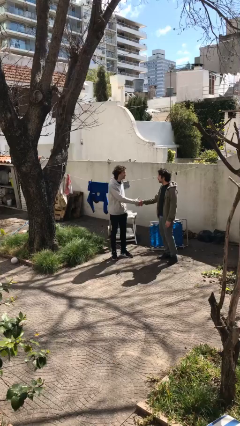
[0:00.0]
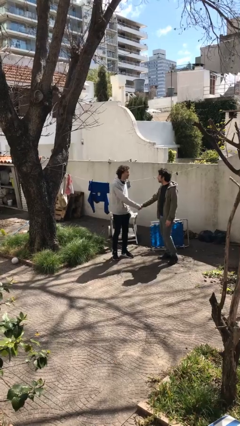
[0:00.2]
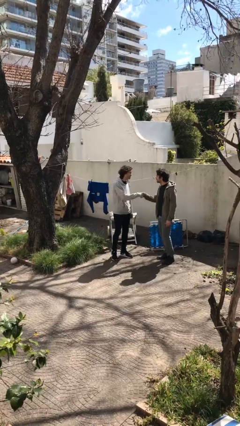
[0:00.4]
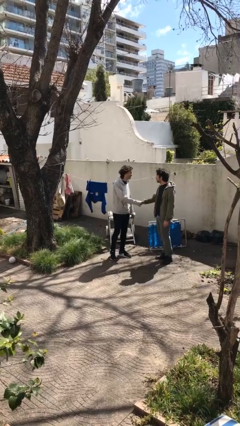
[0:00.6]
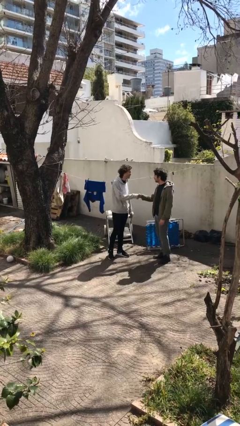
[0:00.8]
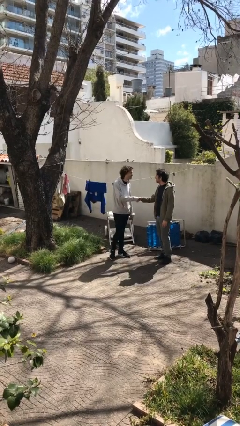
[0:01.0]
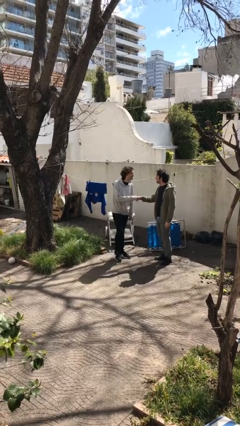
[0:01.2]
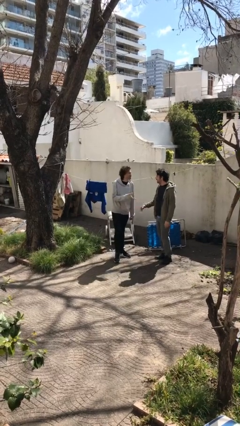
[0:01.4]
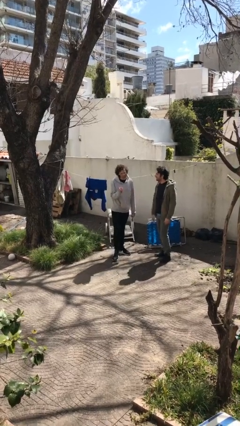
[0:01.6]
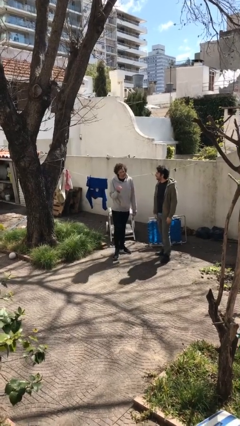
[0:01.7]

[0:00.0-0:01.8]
person shakes hand

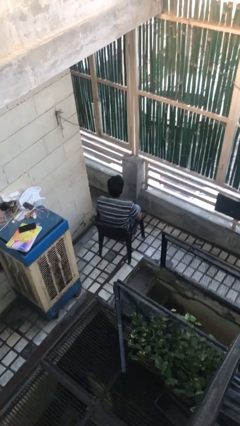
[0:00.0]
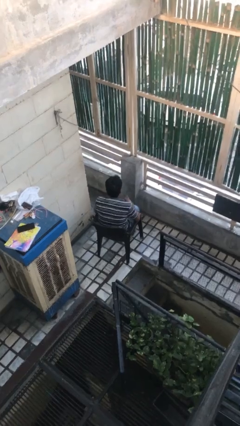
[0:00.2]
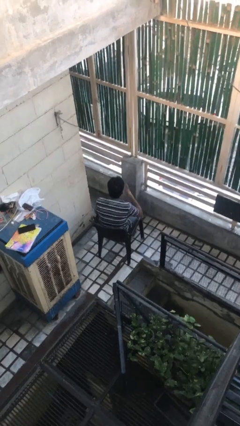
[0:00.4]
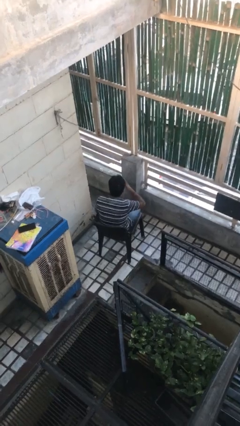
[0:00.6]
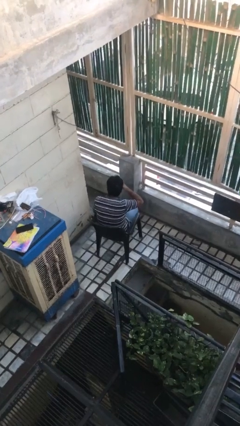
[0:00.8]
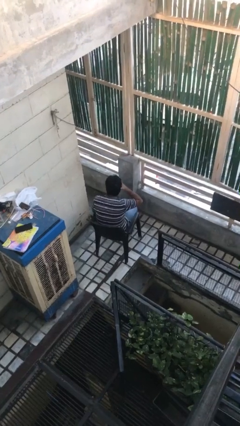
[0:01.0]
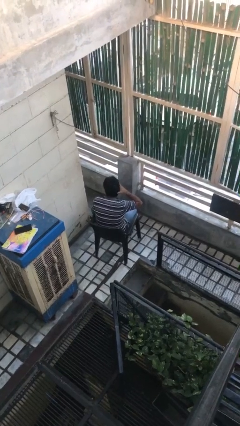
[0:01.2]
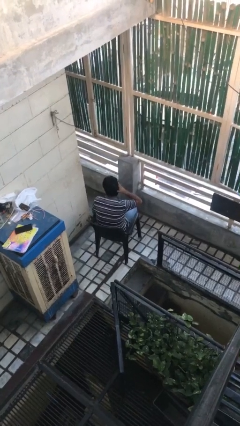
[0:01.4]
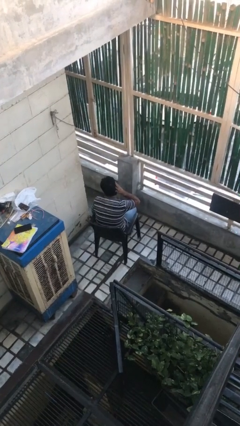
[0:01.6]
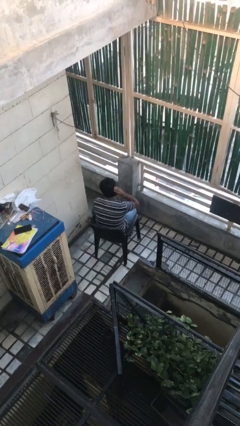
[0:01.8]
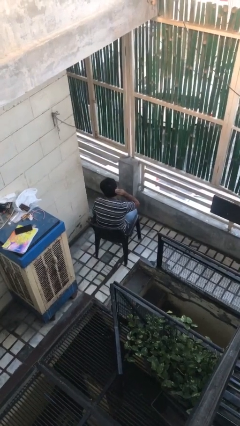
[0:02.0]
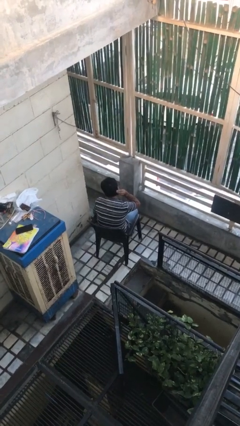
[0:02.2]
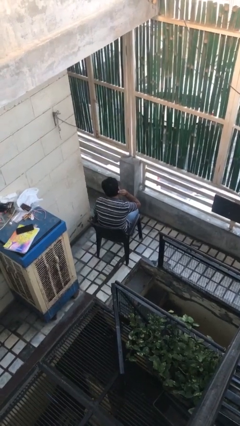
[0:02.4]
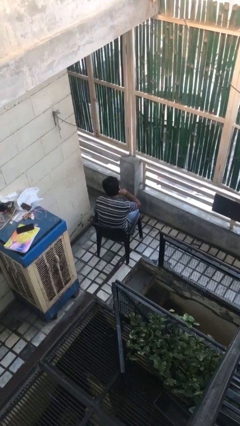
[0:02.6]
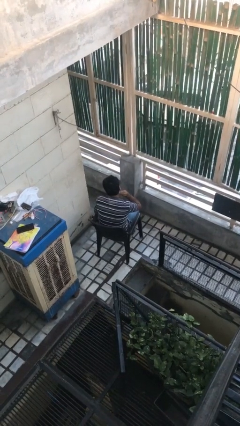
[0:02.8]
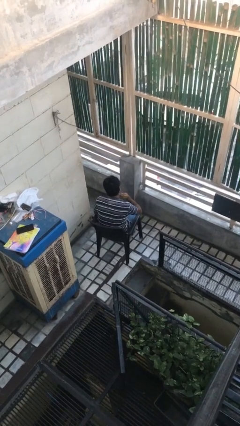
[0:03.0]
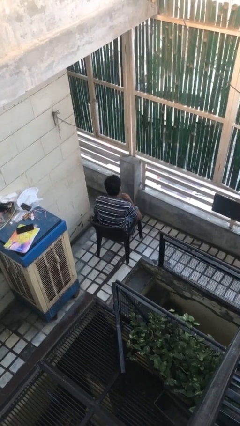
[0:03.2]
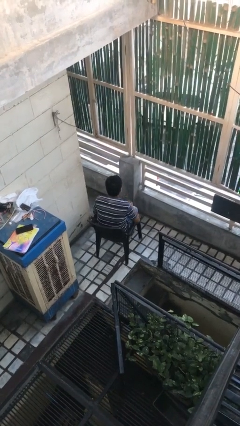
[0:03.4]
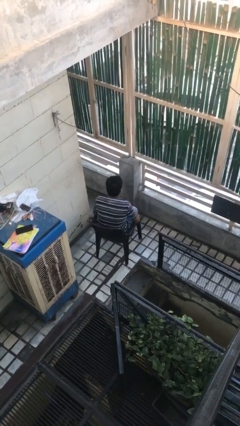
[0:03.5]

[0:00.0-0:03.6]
person strokes hair

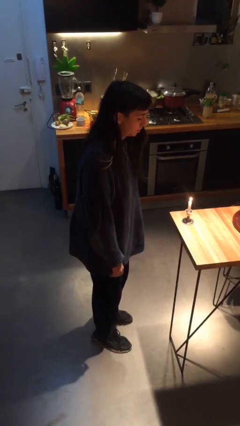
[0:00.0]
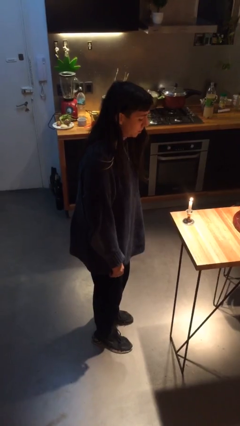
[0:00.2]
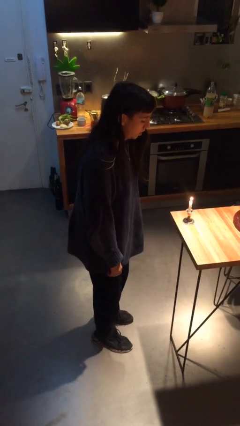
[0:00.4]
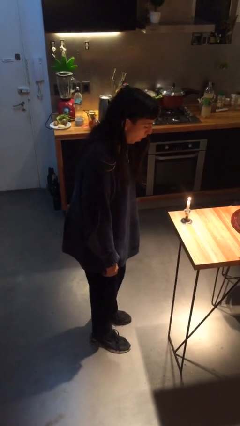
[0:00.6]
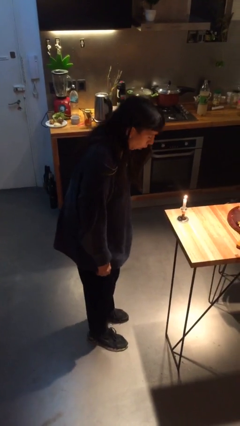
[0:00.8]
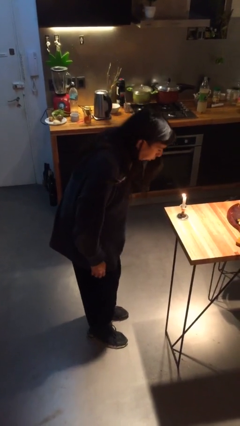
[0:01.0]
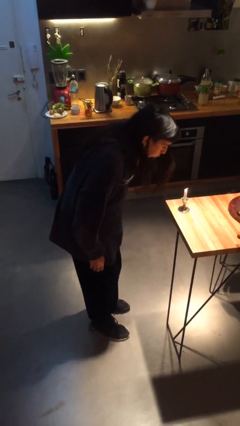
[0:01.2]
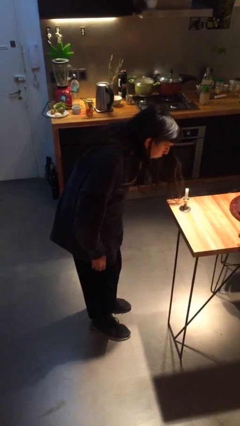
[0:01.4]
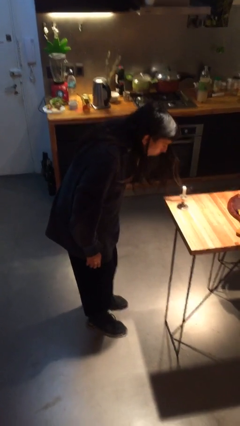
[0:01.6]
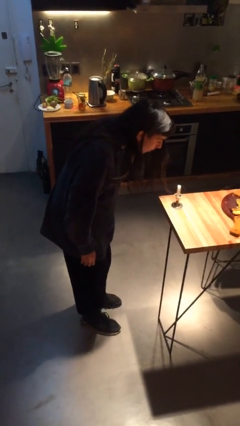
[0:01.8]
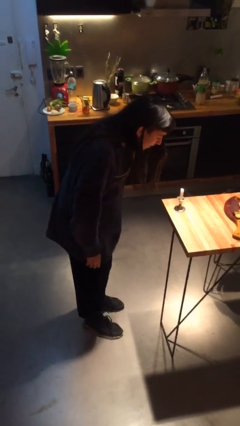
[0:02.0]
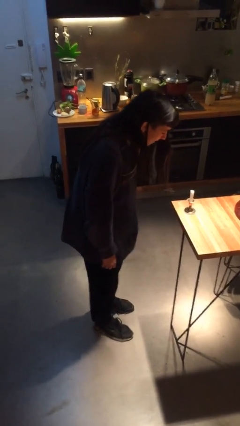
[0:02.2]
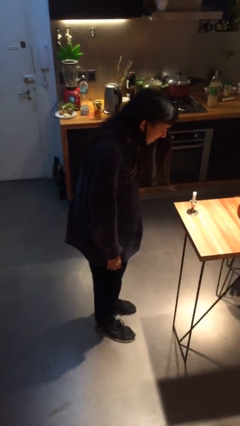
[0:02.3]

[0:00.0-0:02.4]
person extinguishes candle

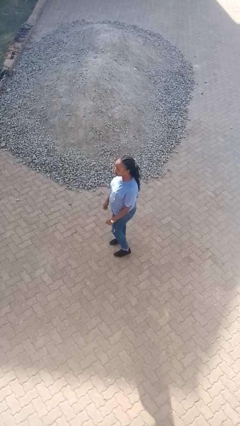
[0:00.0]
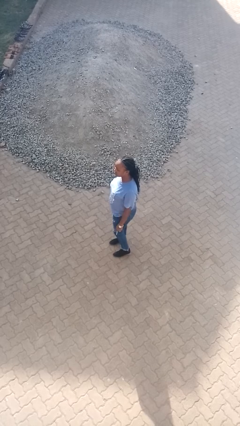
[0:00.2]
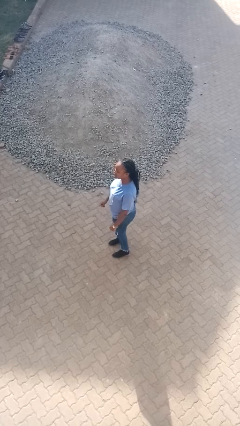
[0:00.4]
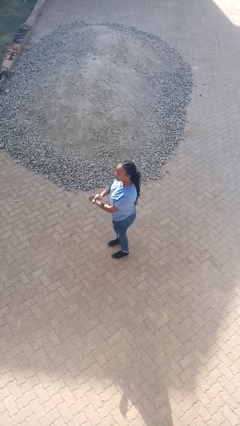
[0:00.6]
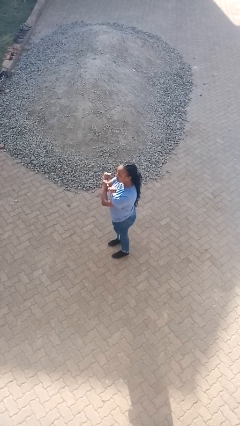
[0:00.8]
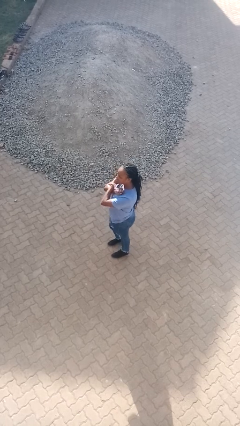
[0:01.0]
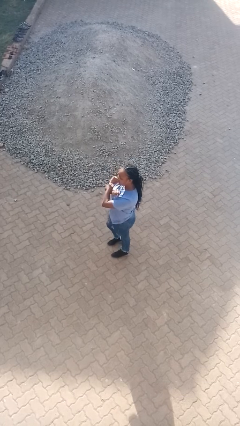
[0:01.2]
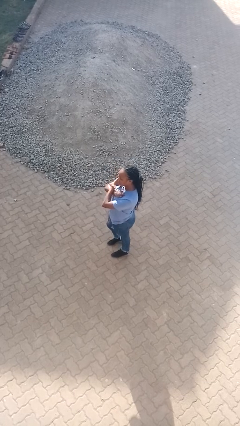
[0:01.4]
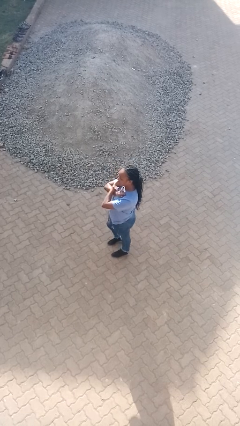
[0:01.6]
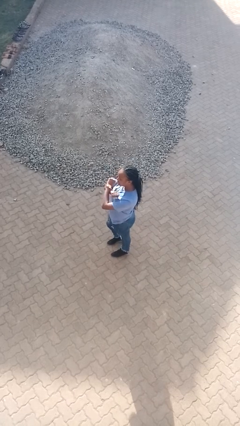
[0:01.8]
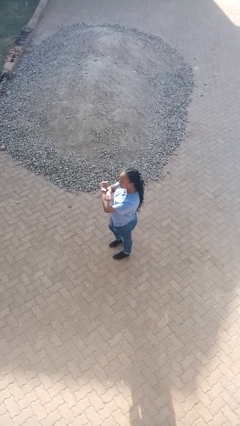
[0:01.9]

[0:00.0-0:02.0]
person gestures arms x

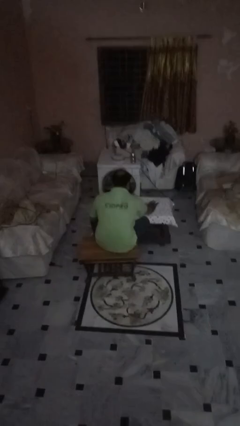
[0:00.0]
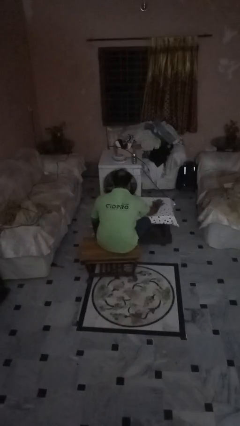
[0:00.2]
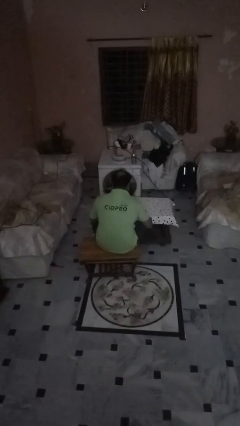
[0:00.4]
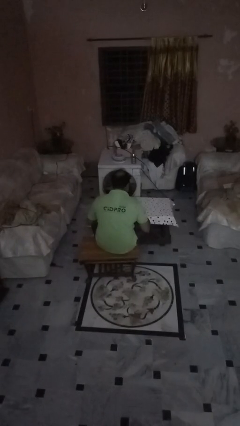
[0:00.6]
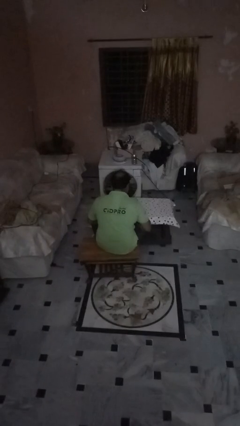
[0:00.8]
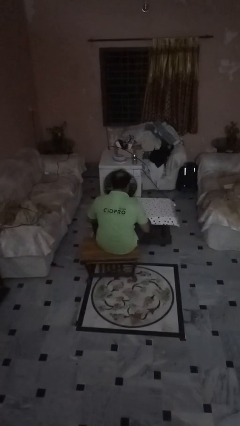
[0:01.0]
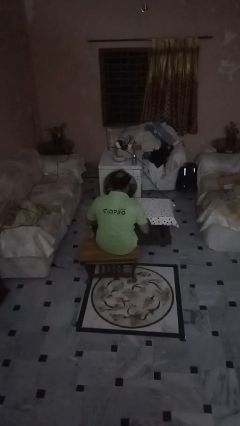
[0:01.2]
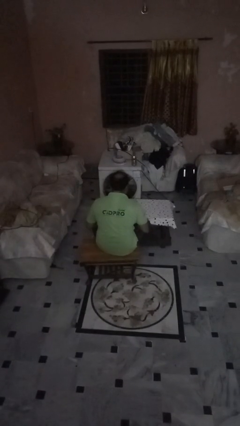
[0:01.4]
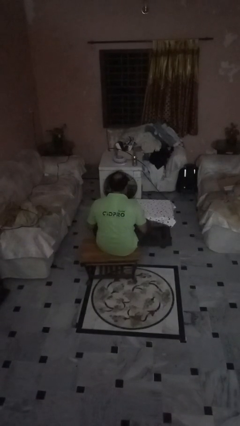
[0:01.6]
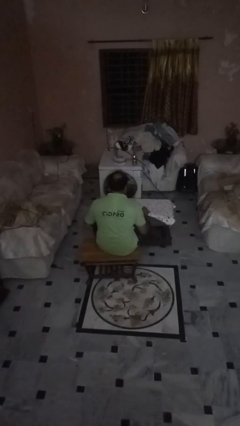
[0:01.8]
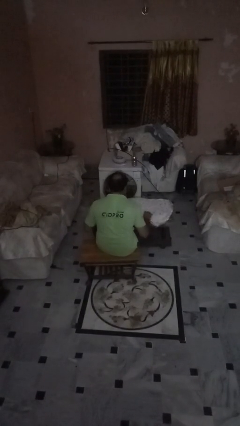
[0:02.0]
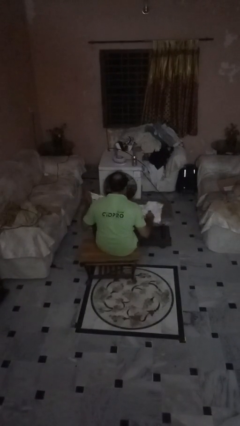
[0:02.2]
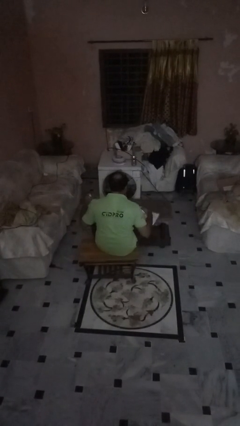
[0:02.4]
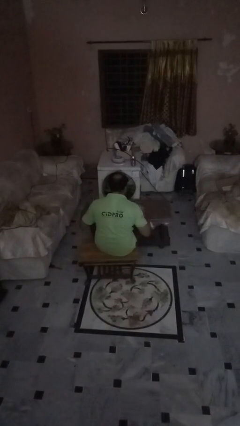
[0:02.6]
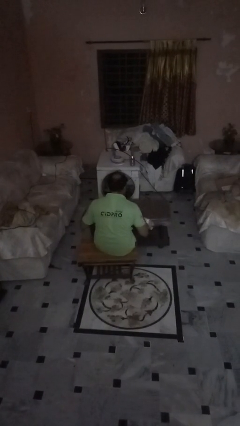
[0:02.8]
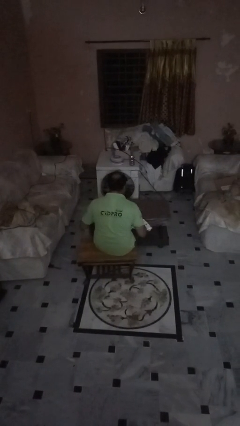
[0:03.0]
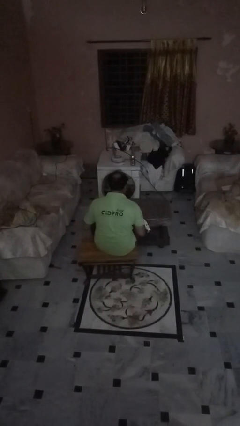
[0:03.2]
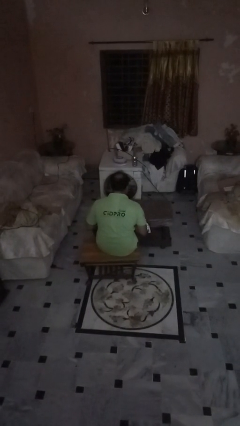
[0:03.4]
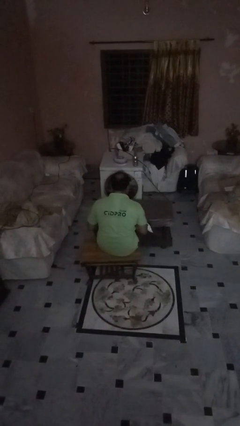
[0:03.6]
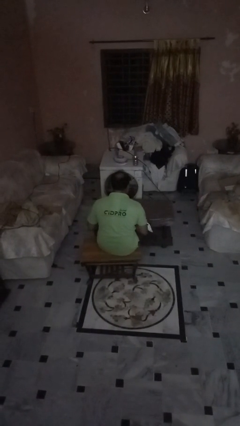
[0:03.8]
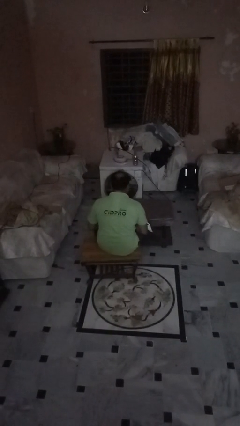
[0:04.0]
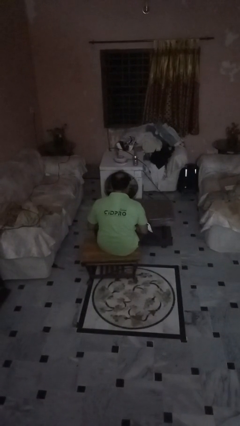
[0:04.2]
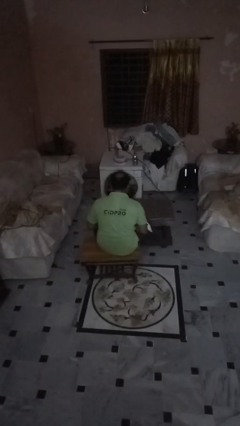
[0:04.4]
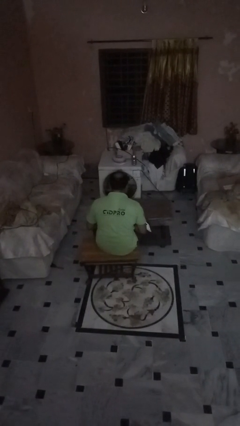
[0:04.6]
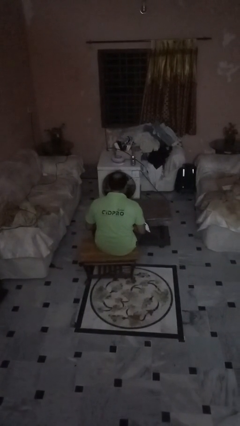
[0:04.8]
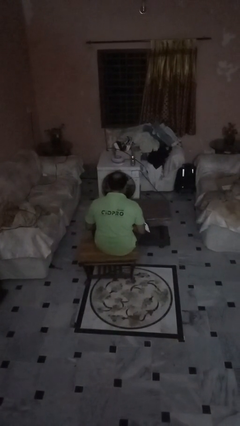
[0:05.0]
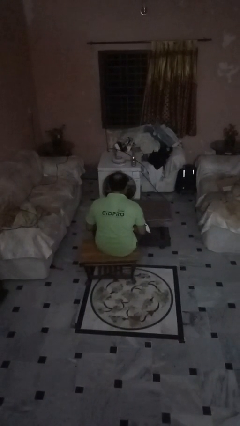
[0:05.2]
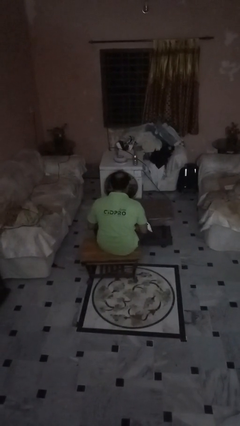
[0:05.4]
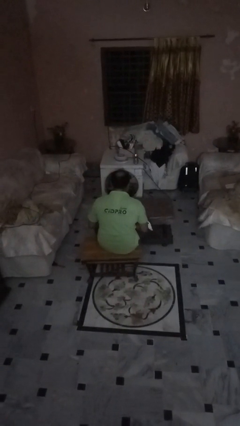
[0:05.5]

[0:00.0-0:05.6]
person folds tablecloth

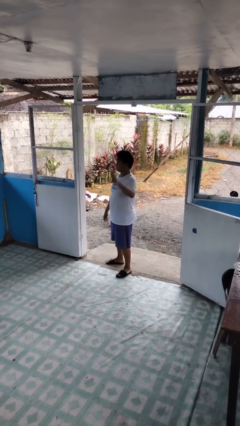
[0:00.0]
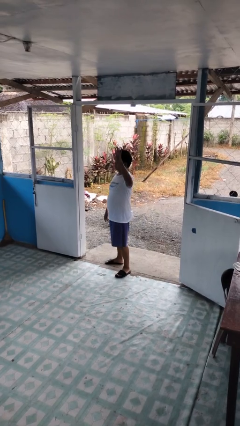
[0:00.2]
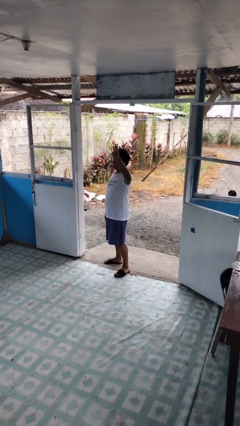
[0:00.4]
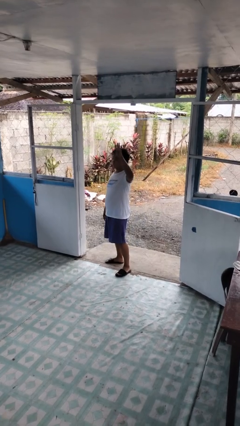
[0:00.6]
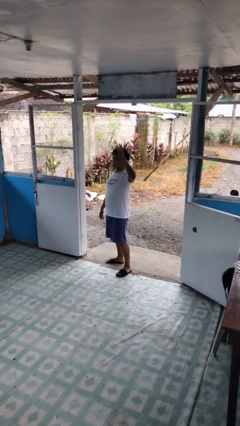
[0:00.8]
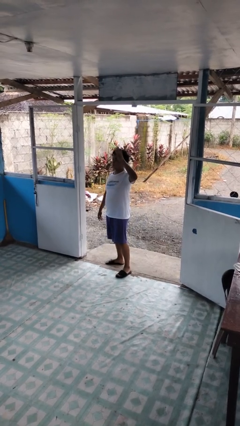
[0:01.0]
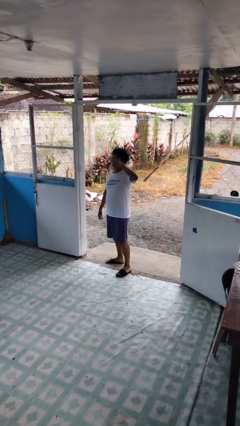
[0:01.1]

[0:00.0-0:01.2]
person gestures number four

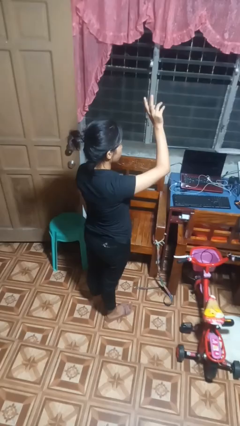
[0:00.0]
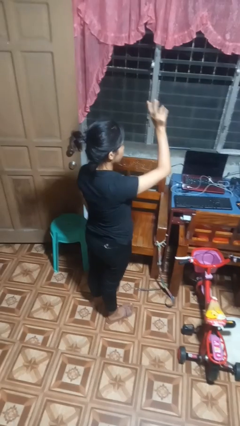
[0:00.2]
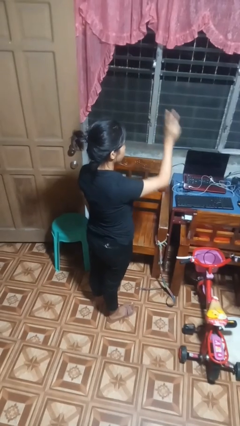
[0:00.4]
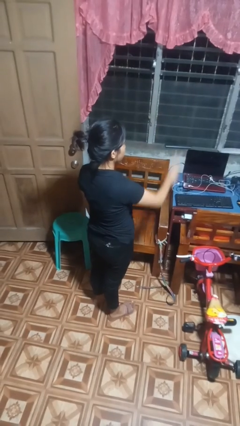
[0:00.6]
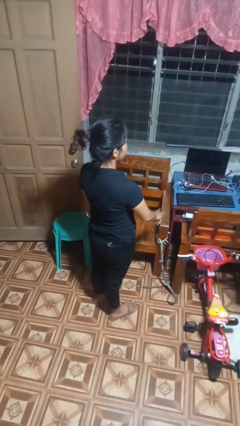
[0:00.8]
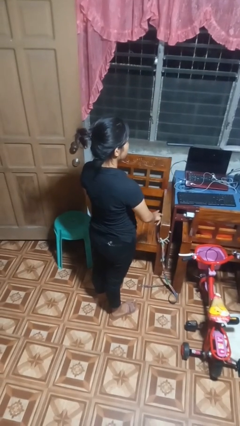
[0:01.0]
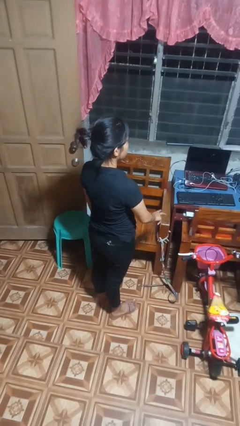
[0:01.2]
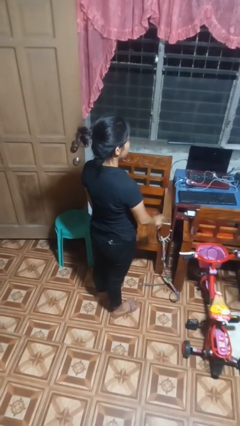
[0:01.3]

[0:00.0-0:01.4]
person gestures swipe down
